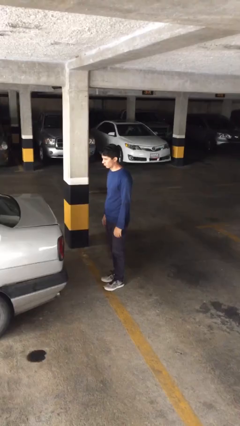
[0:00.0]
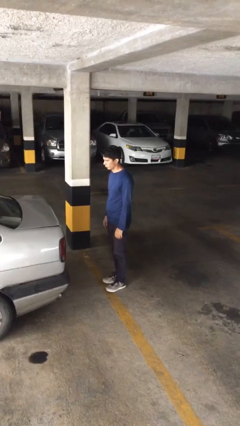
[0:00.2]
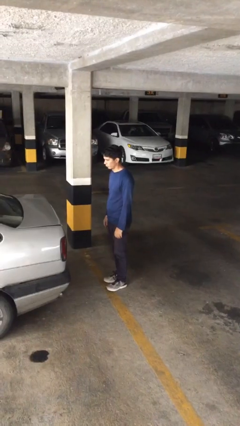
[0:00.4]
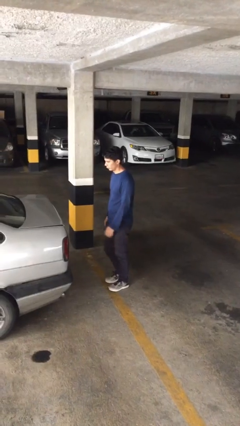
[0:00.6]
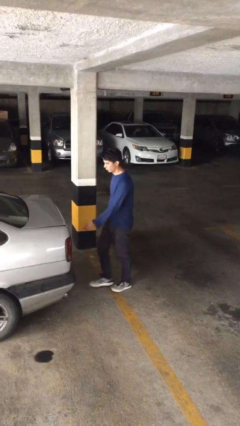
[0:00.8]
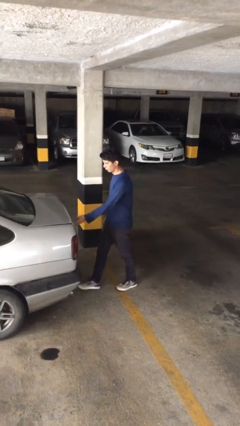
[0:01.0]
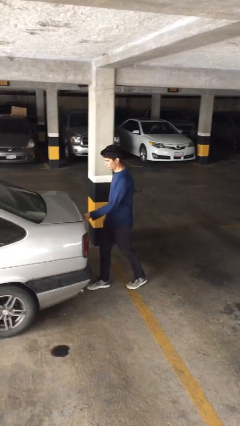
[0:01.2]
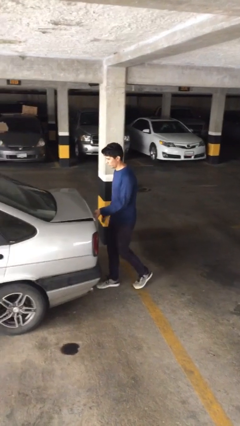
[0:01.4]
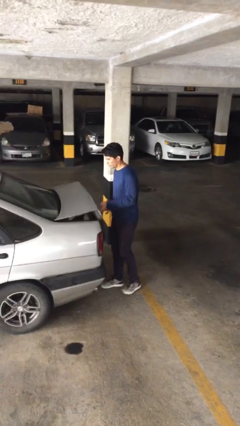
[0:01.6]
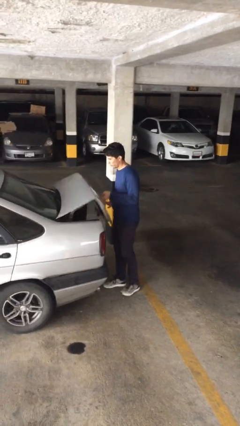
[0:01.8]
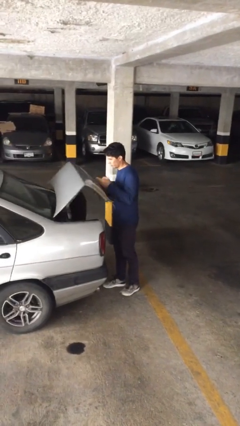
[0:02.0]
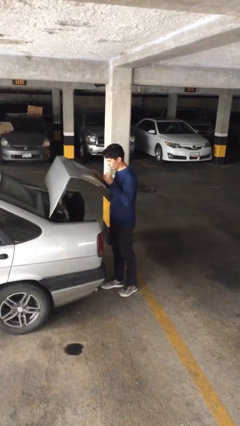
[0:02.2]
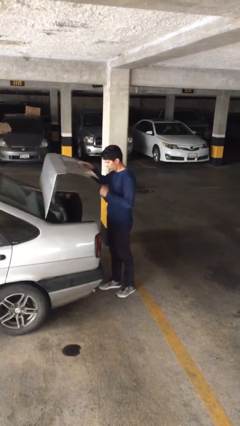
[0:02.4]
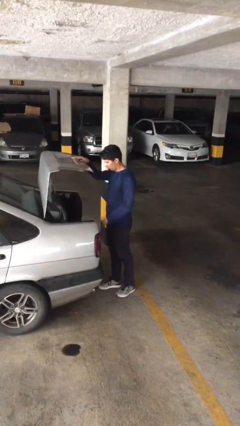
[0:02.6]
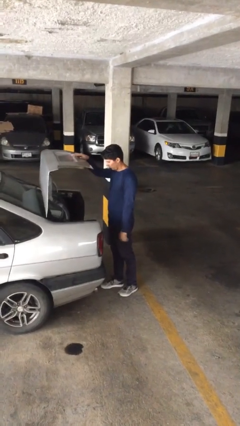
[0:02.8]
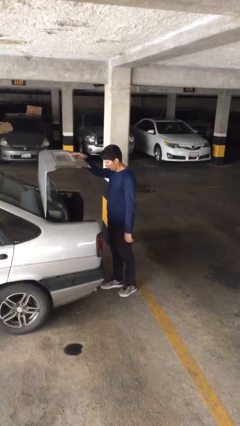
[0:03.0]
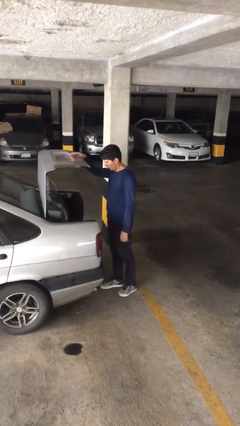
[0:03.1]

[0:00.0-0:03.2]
person opens car trunk

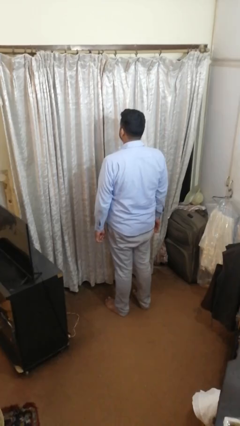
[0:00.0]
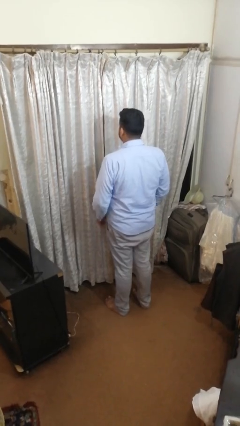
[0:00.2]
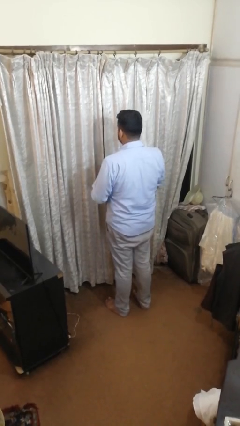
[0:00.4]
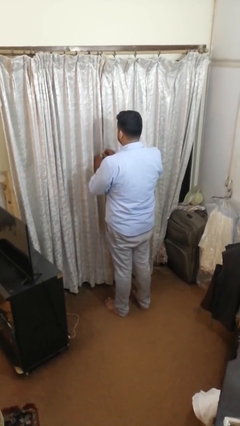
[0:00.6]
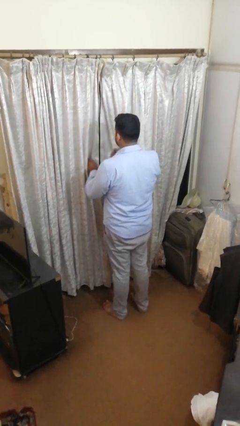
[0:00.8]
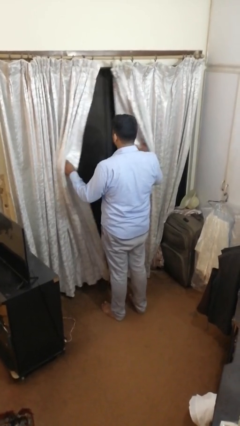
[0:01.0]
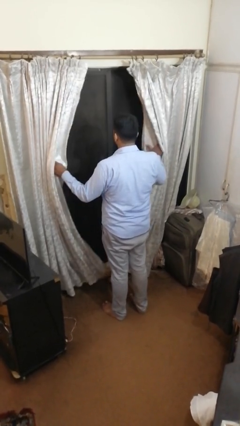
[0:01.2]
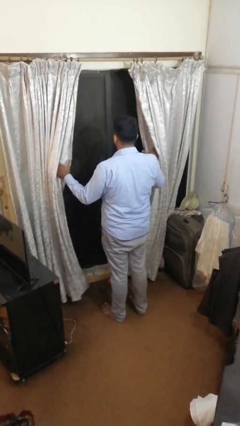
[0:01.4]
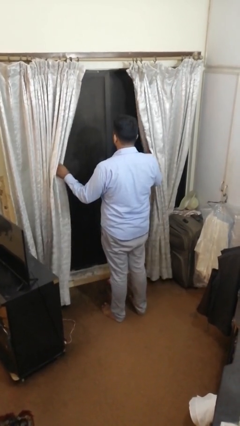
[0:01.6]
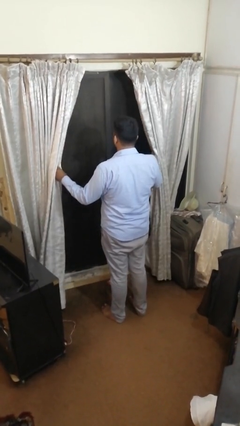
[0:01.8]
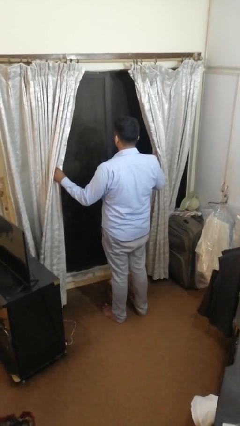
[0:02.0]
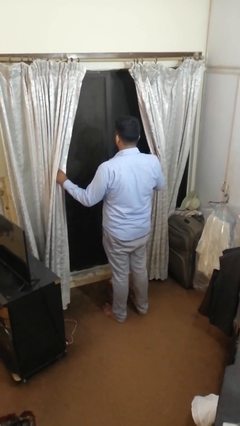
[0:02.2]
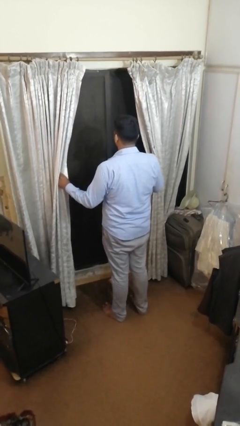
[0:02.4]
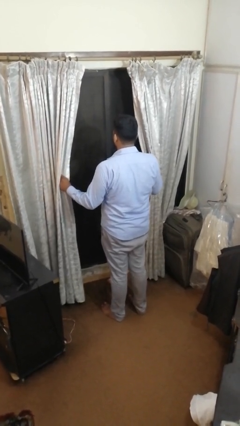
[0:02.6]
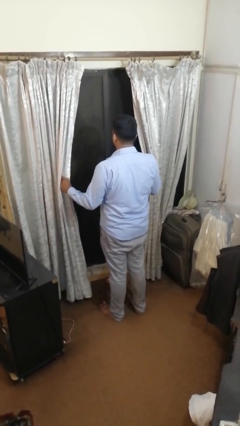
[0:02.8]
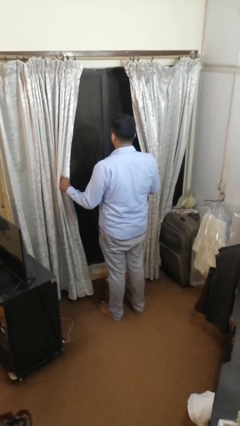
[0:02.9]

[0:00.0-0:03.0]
person opens curtains

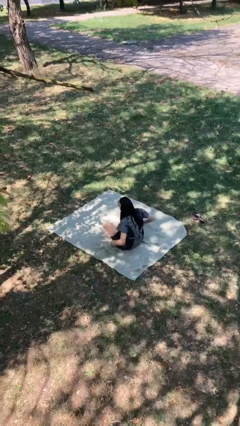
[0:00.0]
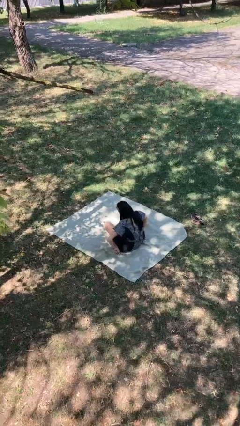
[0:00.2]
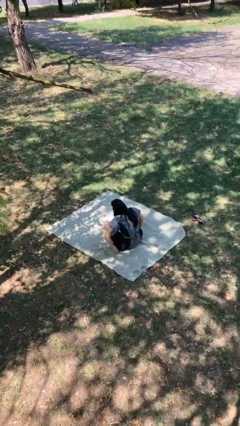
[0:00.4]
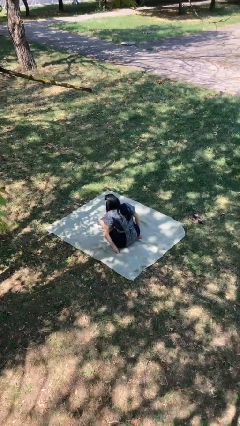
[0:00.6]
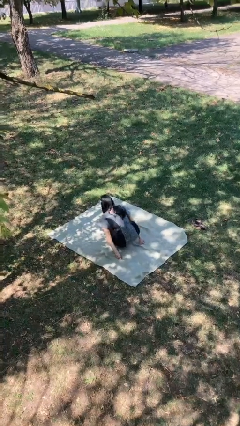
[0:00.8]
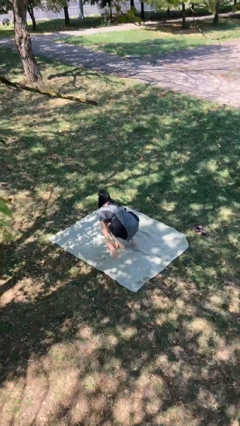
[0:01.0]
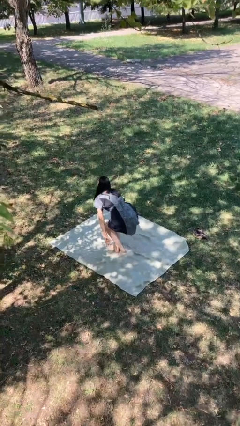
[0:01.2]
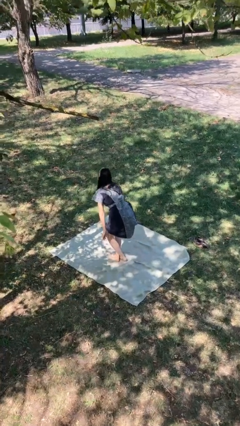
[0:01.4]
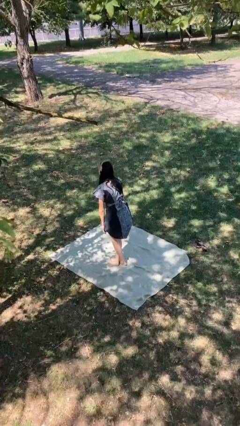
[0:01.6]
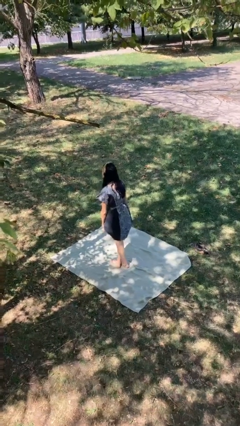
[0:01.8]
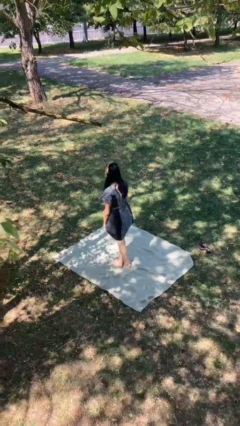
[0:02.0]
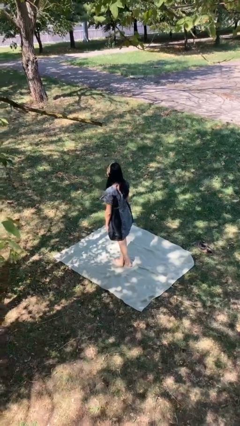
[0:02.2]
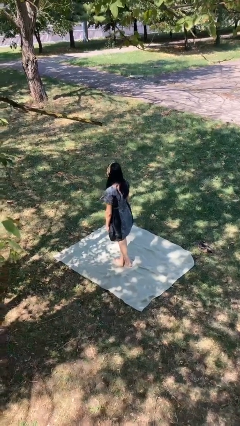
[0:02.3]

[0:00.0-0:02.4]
person stands up from floor

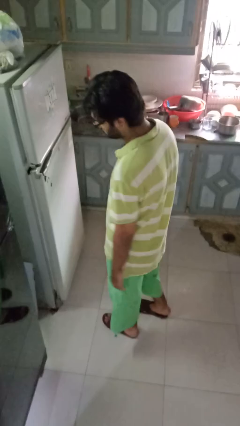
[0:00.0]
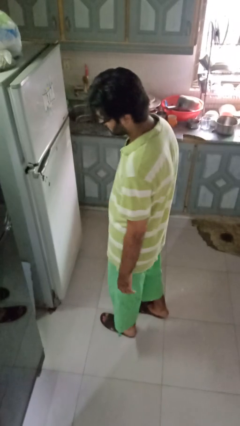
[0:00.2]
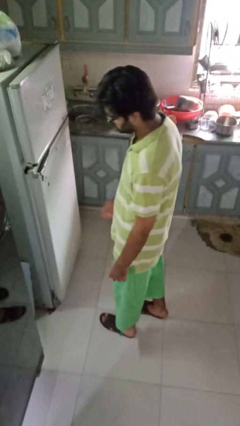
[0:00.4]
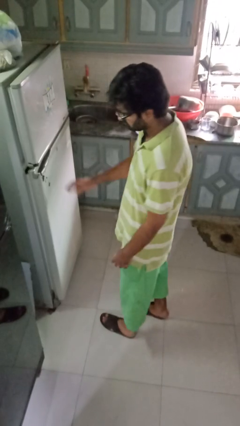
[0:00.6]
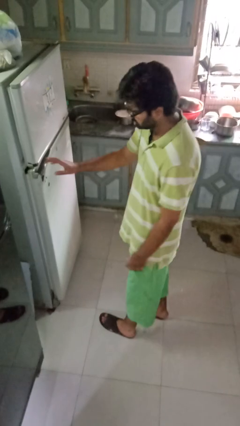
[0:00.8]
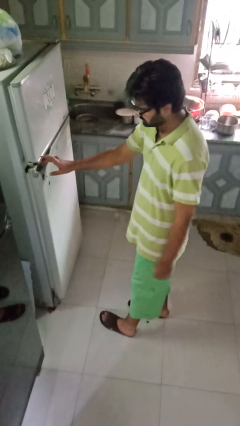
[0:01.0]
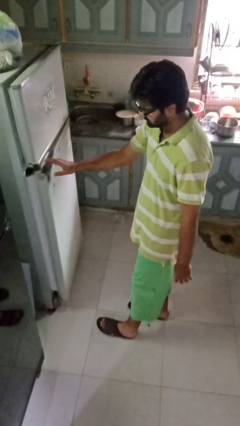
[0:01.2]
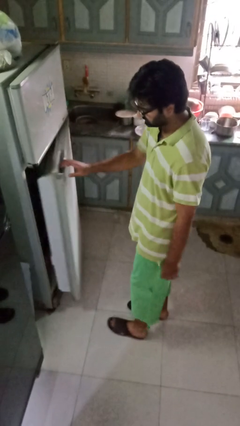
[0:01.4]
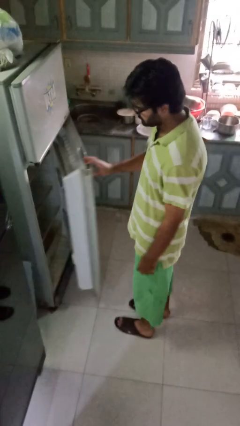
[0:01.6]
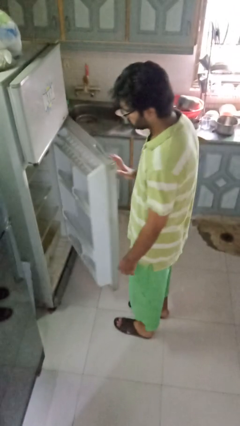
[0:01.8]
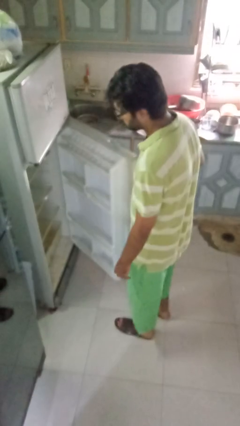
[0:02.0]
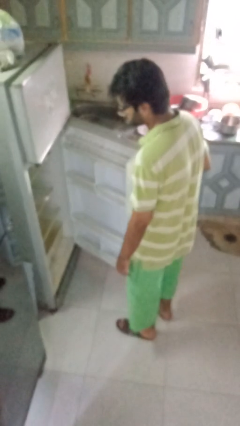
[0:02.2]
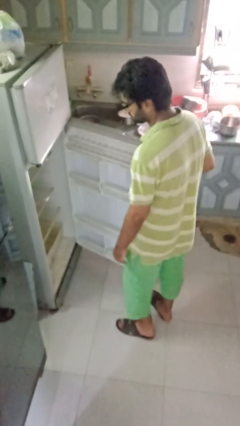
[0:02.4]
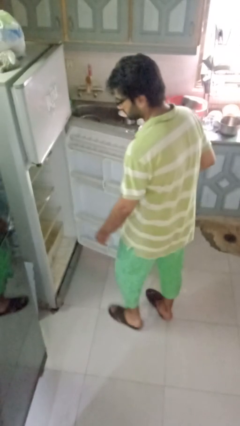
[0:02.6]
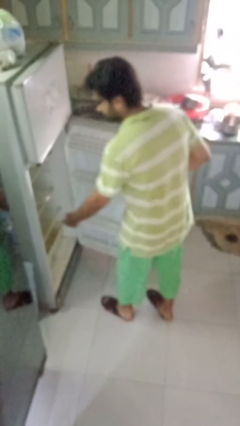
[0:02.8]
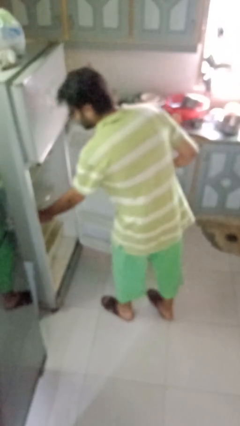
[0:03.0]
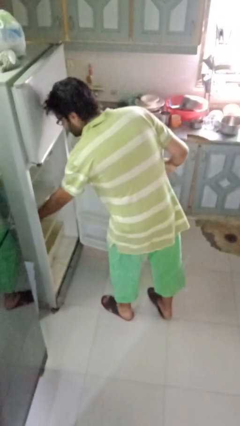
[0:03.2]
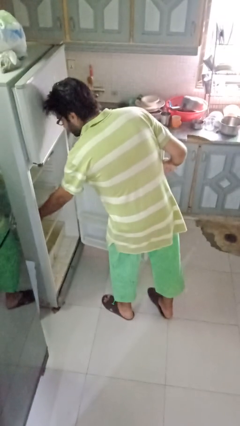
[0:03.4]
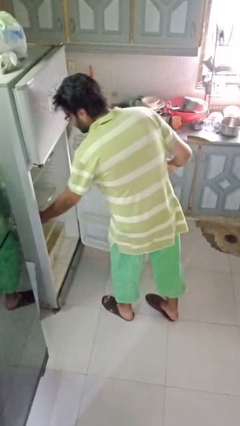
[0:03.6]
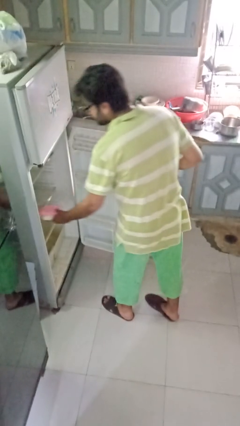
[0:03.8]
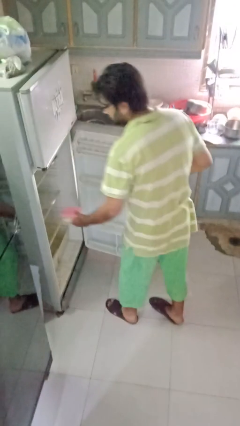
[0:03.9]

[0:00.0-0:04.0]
person takes object from refrigerator

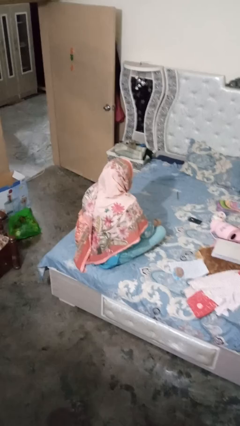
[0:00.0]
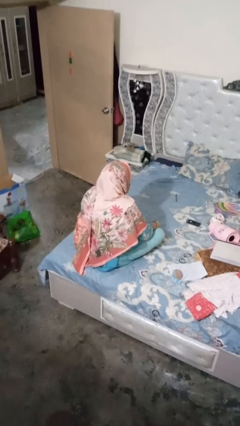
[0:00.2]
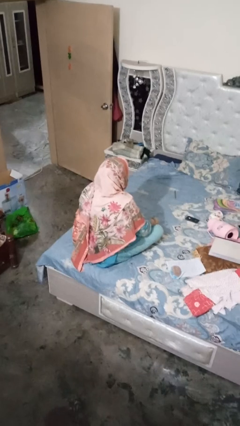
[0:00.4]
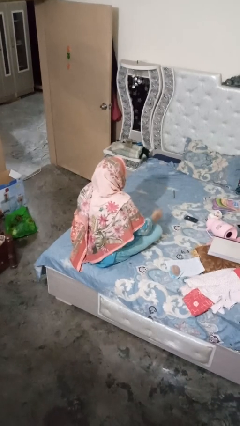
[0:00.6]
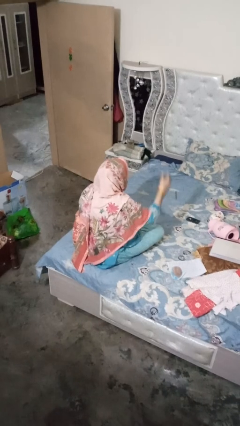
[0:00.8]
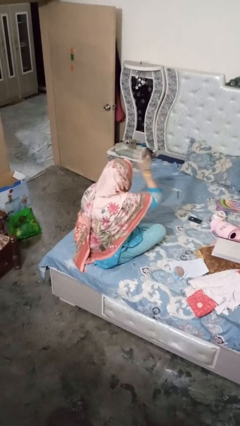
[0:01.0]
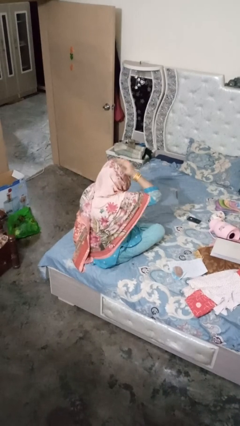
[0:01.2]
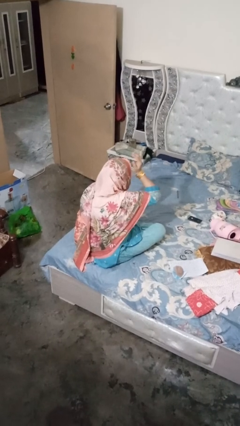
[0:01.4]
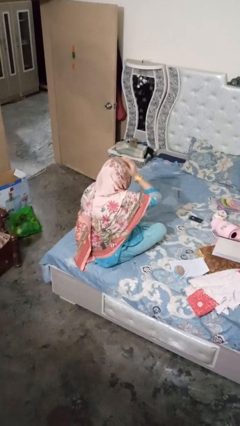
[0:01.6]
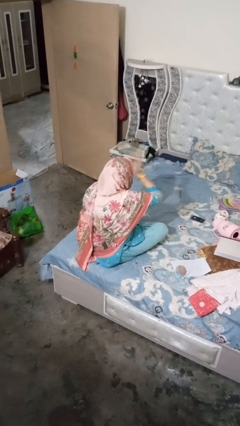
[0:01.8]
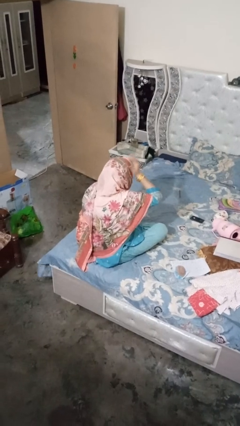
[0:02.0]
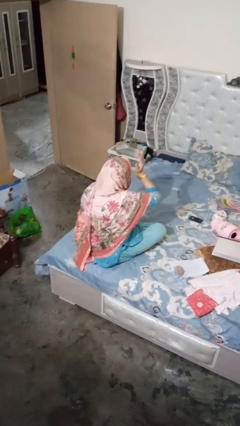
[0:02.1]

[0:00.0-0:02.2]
person pats head

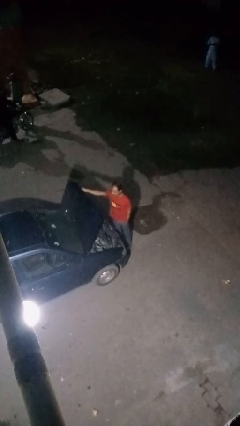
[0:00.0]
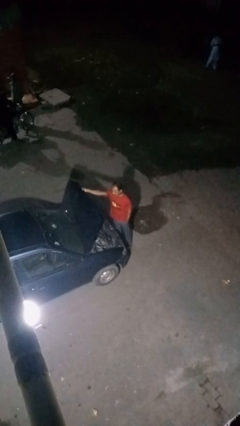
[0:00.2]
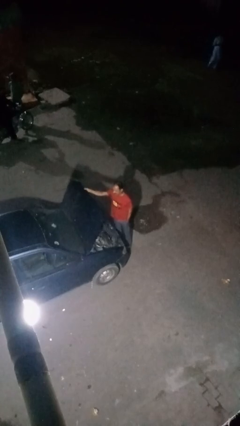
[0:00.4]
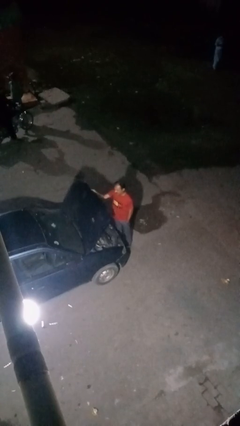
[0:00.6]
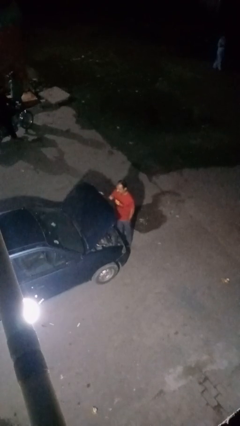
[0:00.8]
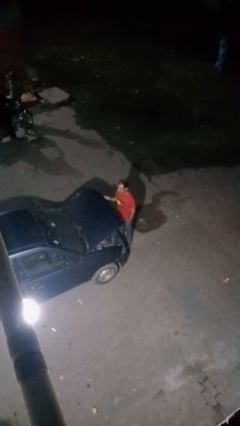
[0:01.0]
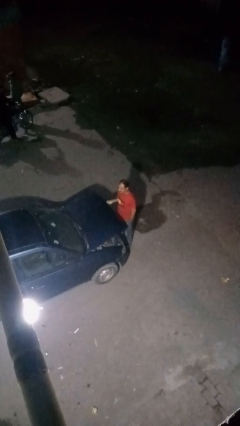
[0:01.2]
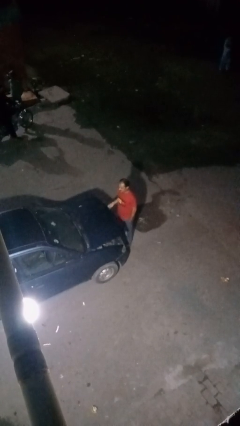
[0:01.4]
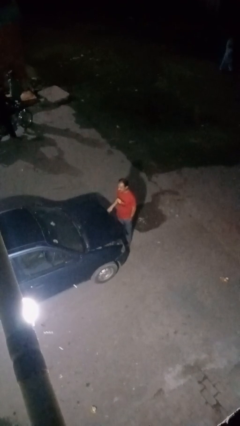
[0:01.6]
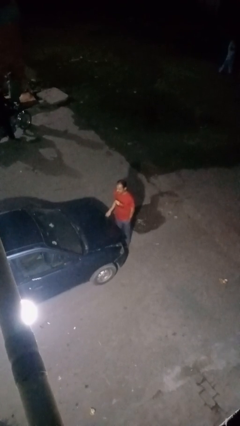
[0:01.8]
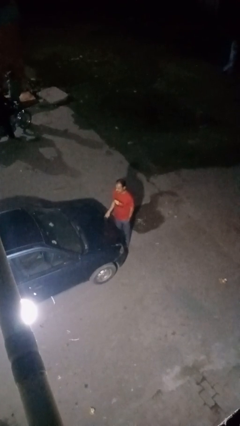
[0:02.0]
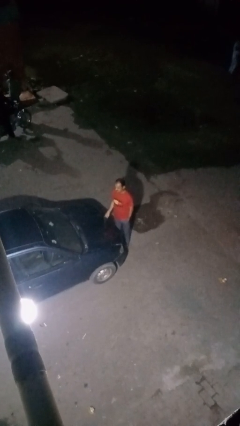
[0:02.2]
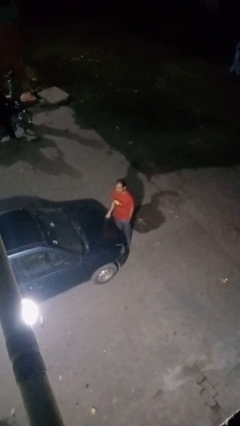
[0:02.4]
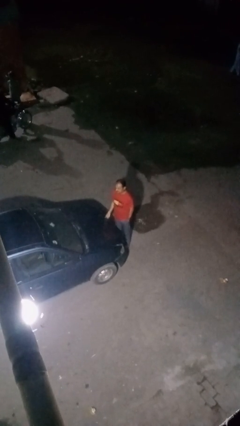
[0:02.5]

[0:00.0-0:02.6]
person closes car hood
